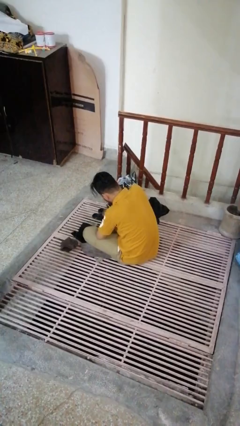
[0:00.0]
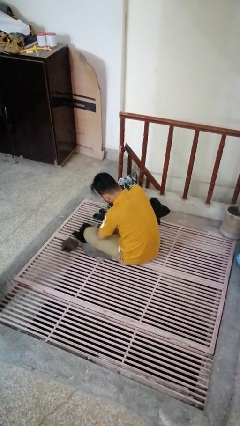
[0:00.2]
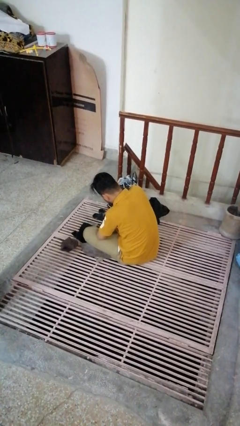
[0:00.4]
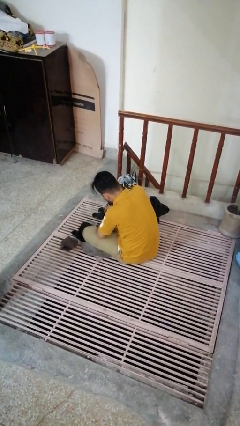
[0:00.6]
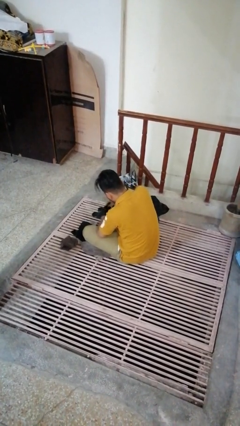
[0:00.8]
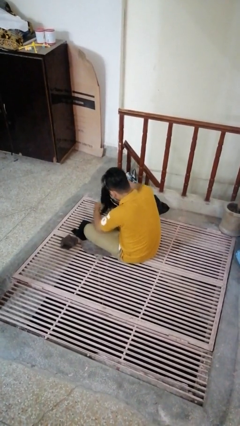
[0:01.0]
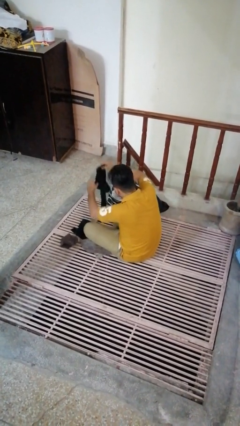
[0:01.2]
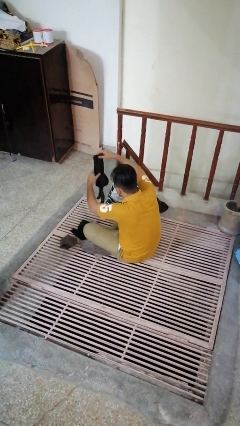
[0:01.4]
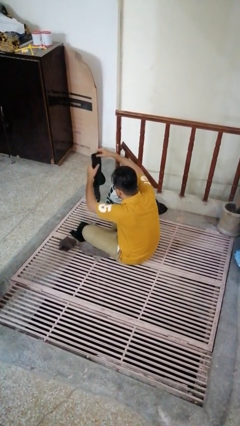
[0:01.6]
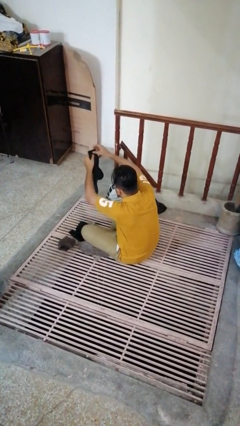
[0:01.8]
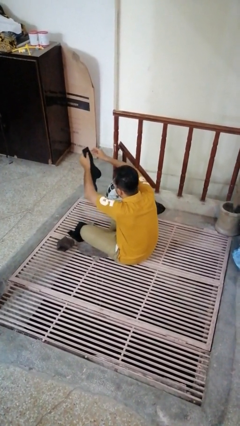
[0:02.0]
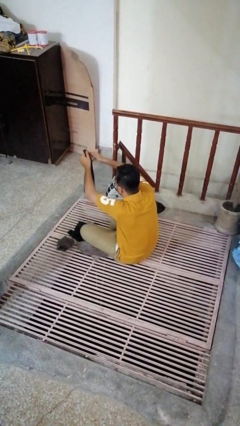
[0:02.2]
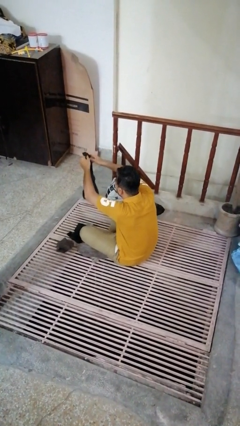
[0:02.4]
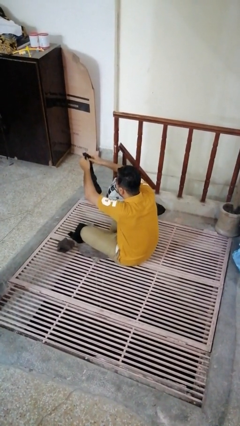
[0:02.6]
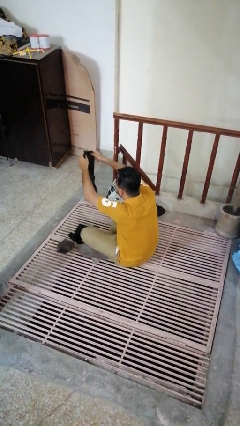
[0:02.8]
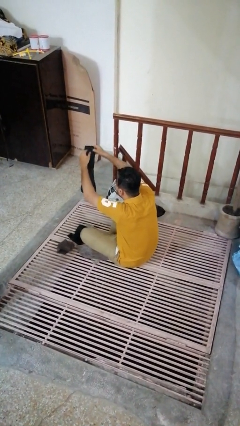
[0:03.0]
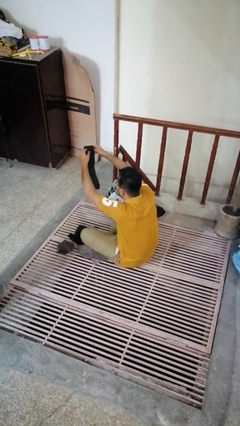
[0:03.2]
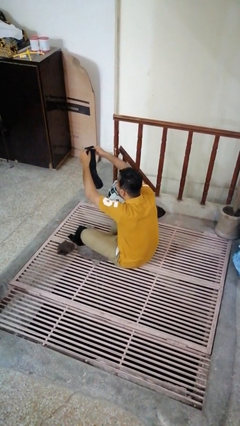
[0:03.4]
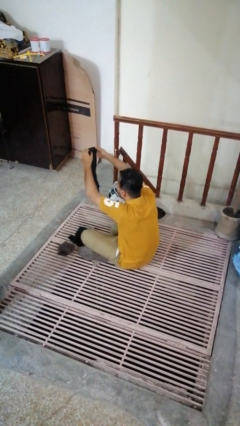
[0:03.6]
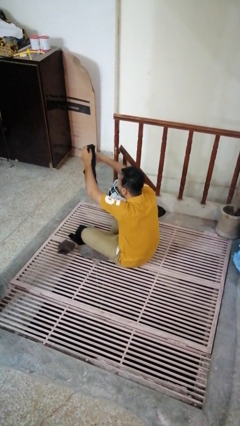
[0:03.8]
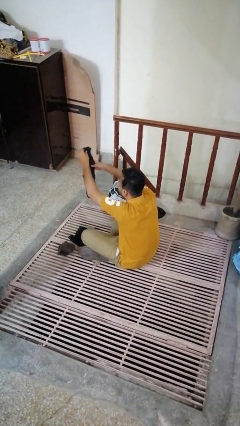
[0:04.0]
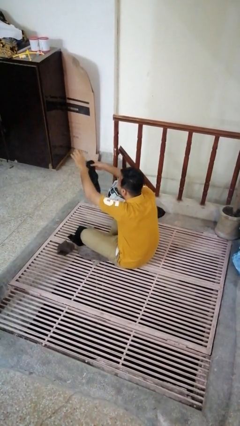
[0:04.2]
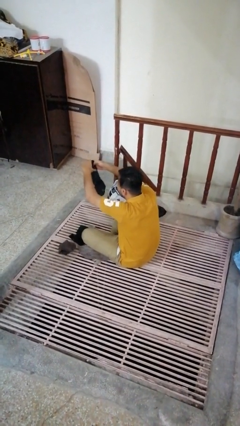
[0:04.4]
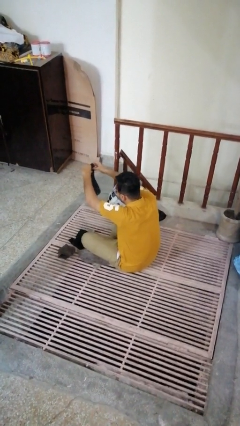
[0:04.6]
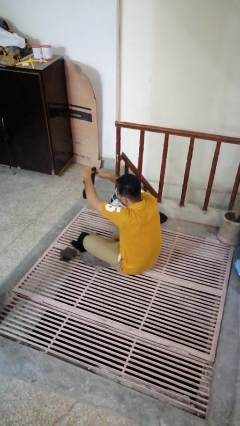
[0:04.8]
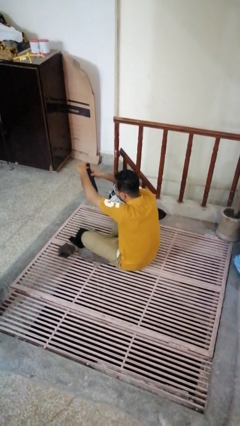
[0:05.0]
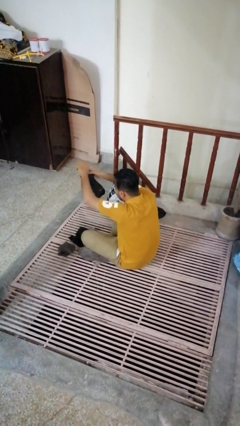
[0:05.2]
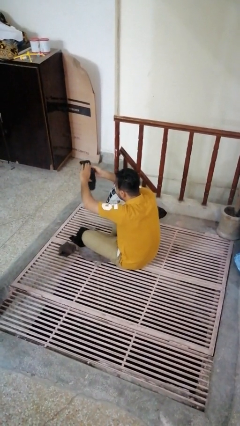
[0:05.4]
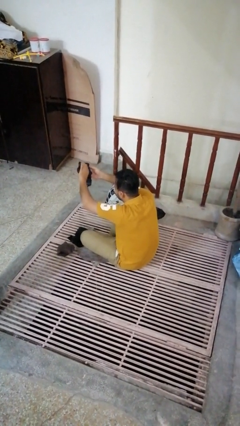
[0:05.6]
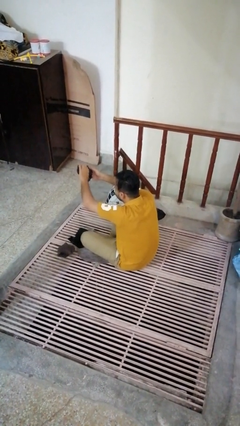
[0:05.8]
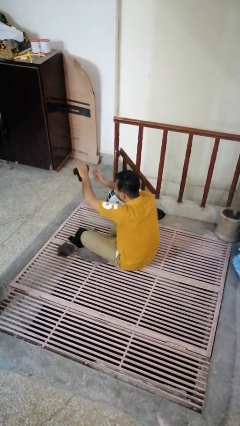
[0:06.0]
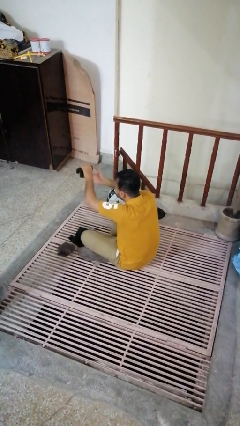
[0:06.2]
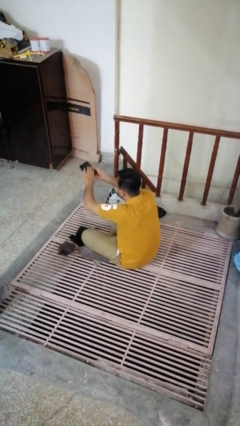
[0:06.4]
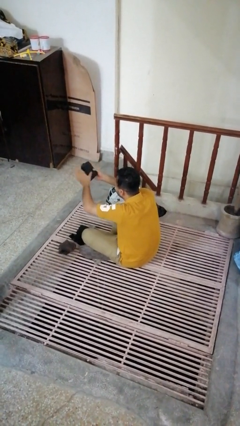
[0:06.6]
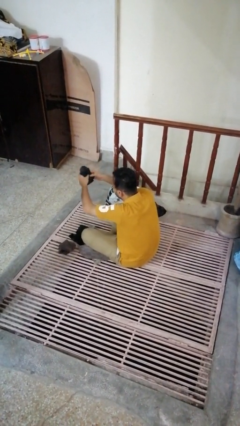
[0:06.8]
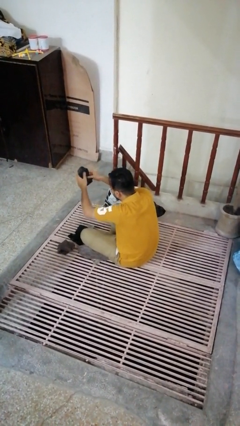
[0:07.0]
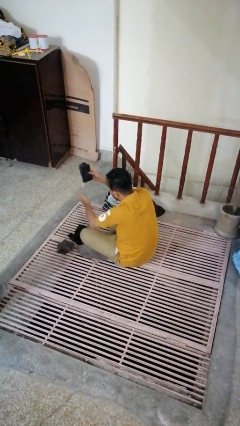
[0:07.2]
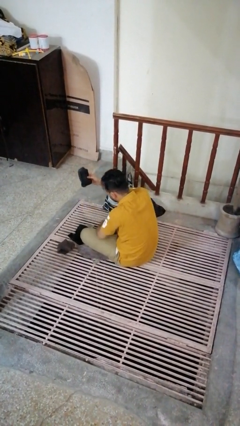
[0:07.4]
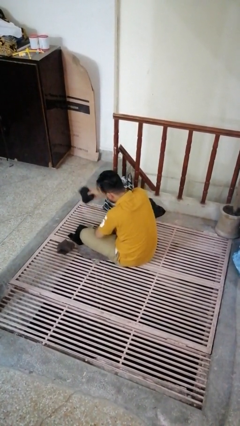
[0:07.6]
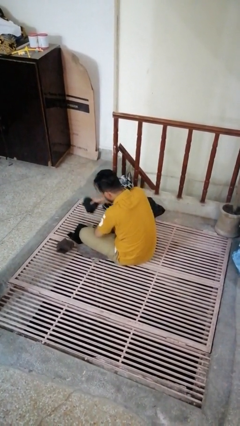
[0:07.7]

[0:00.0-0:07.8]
person folds socks

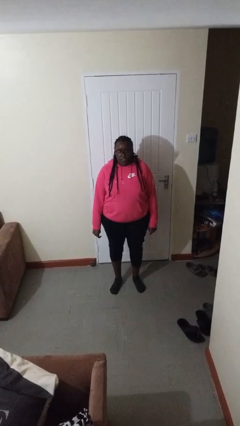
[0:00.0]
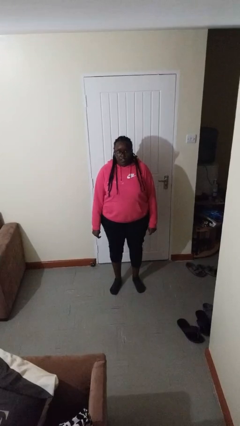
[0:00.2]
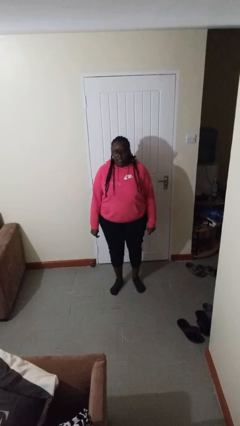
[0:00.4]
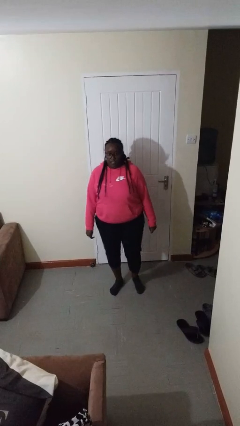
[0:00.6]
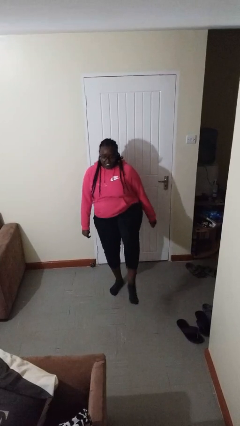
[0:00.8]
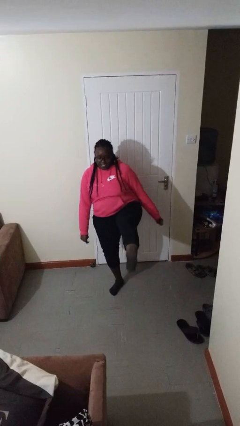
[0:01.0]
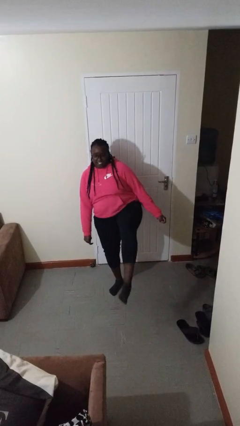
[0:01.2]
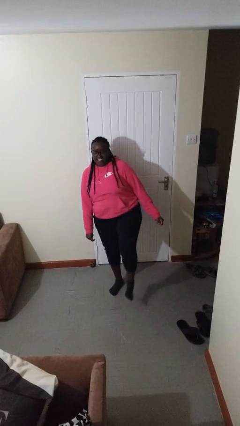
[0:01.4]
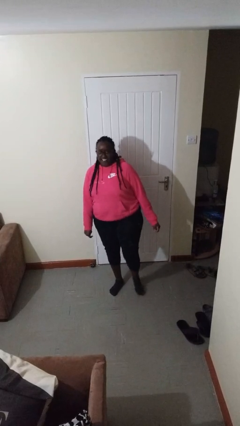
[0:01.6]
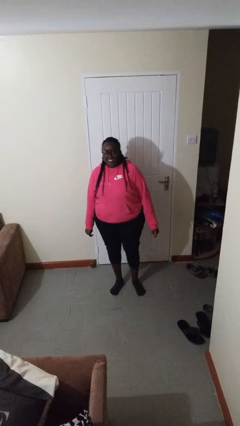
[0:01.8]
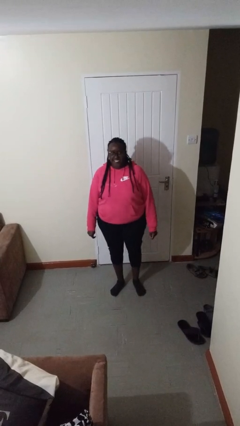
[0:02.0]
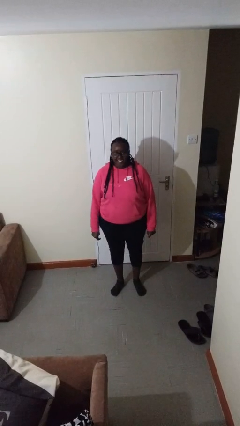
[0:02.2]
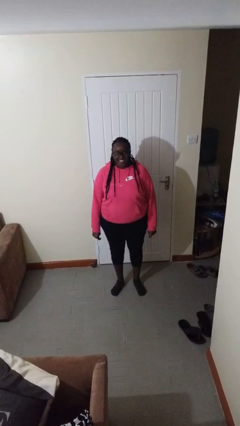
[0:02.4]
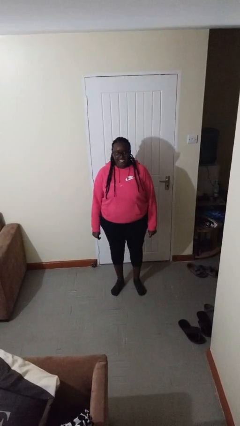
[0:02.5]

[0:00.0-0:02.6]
person karate kicks

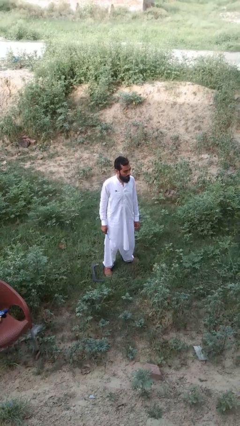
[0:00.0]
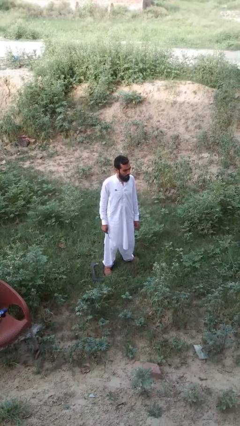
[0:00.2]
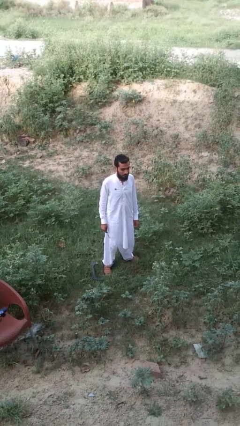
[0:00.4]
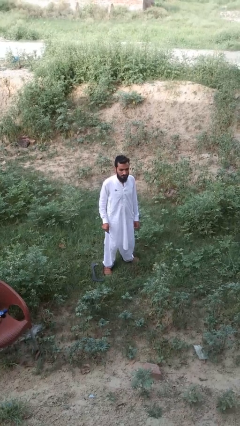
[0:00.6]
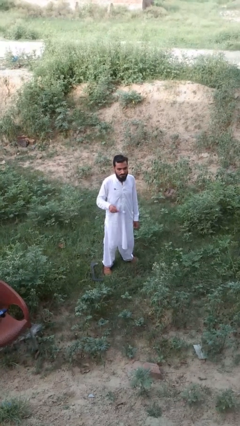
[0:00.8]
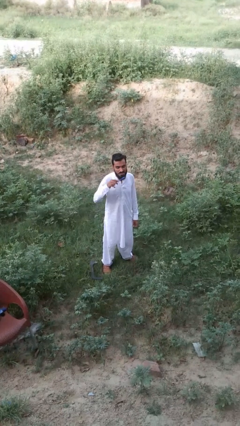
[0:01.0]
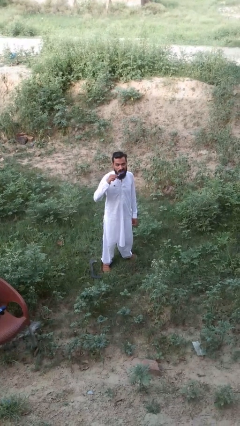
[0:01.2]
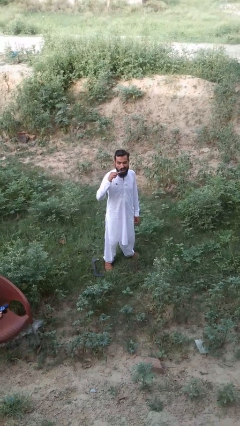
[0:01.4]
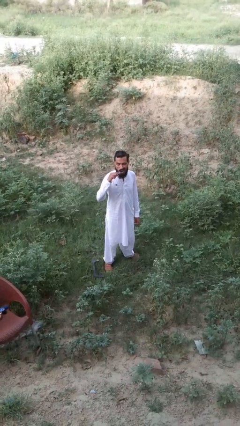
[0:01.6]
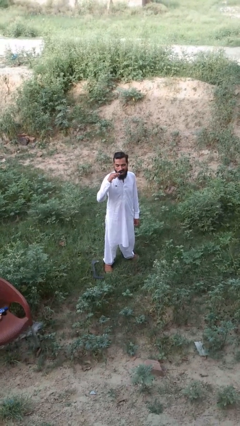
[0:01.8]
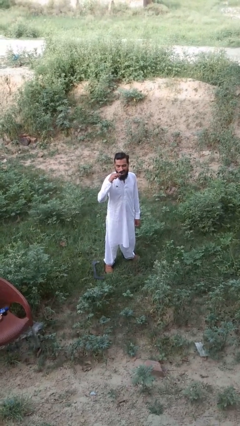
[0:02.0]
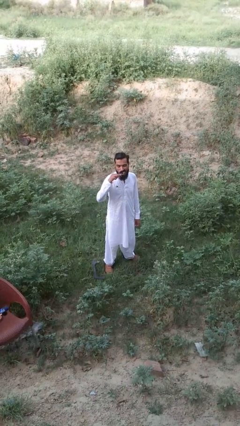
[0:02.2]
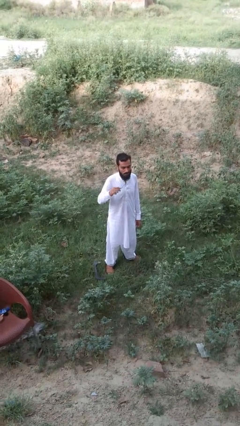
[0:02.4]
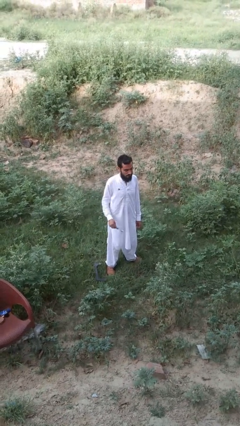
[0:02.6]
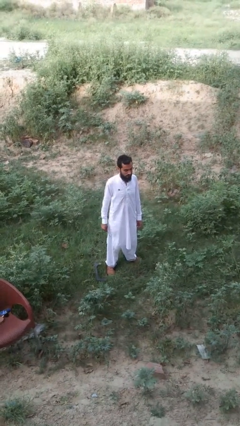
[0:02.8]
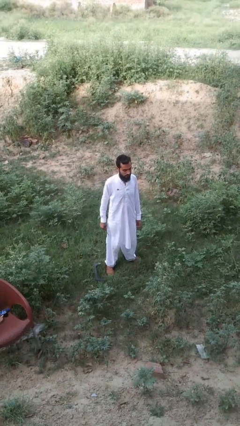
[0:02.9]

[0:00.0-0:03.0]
person brushes teeth

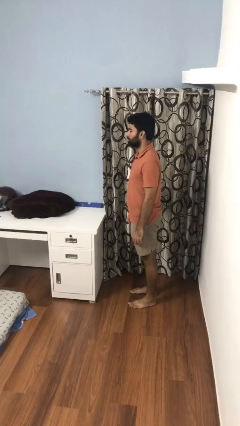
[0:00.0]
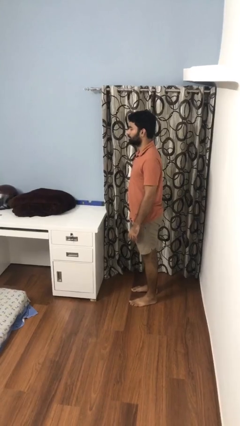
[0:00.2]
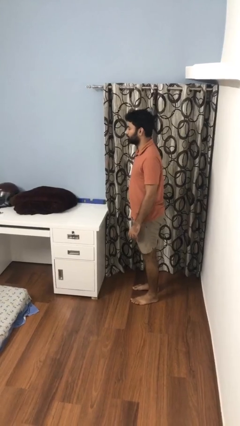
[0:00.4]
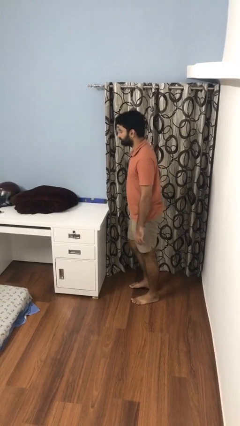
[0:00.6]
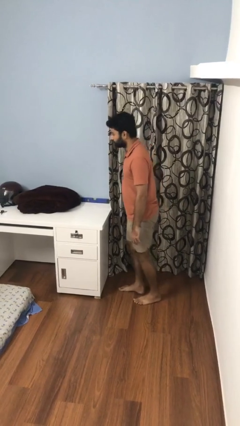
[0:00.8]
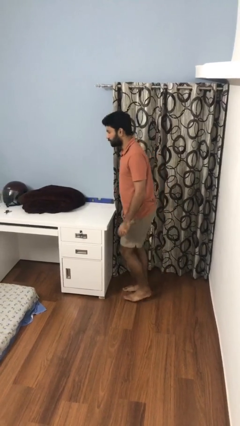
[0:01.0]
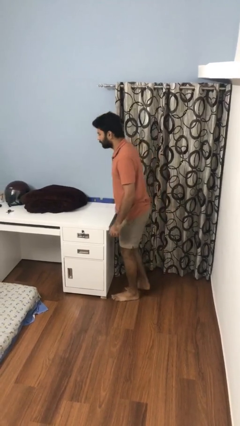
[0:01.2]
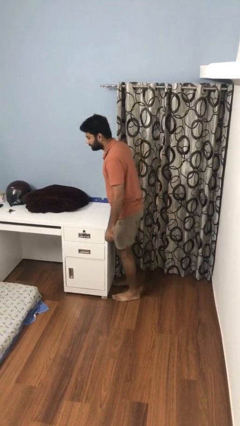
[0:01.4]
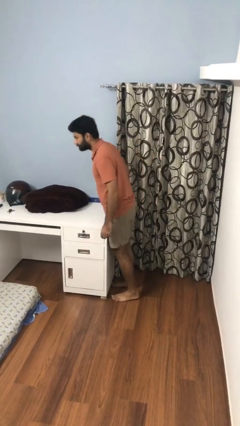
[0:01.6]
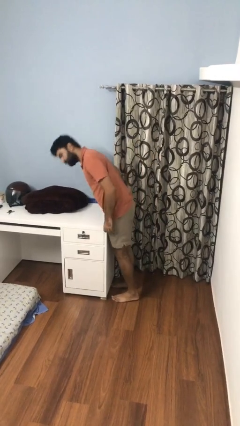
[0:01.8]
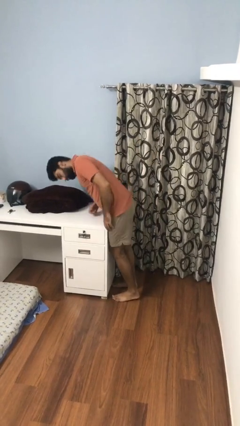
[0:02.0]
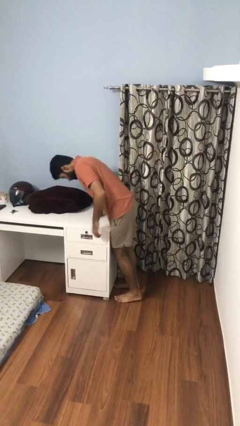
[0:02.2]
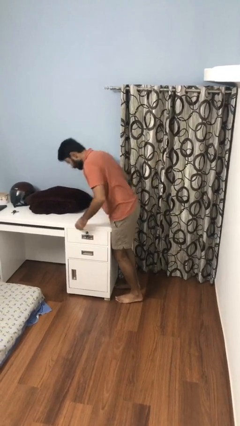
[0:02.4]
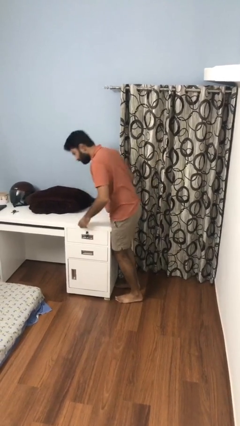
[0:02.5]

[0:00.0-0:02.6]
person bumps into table

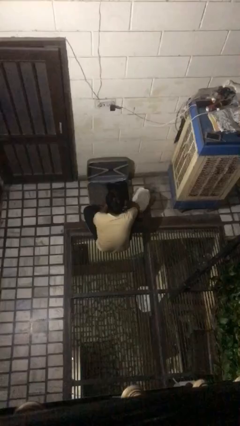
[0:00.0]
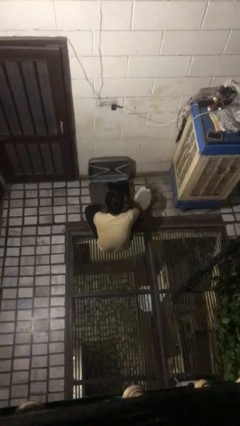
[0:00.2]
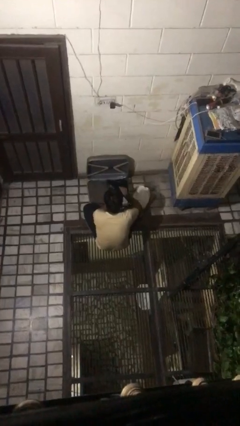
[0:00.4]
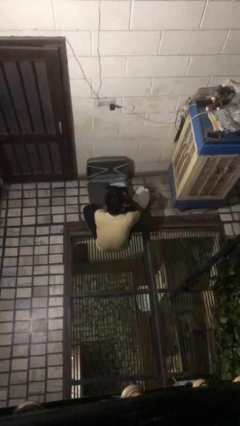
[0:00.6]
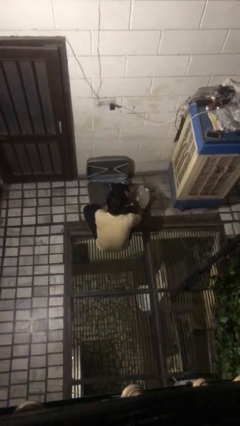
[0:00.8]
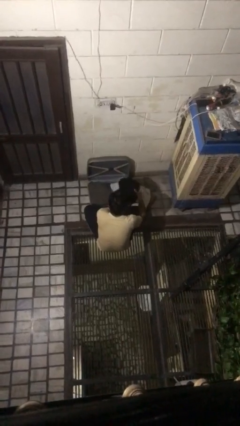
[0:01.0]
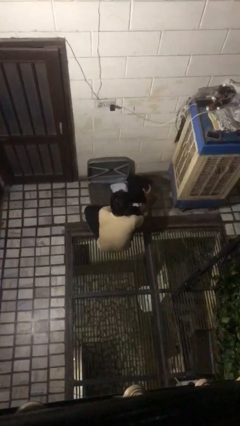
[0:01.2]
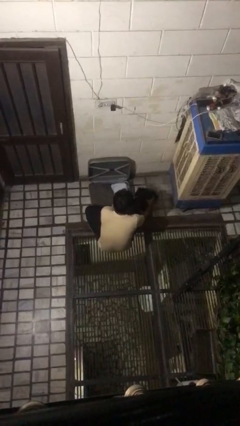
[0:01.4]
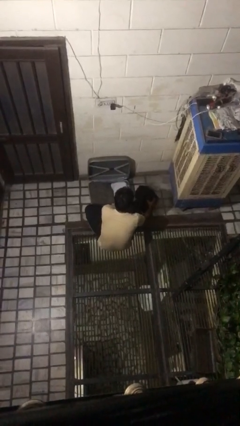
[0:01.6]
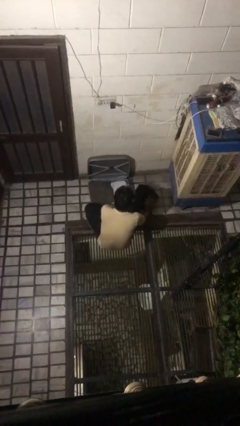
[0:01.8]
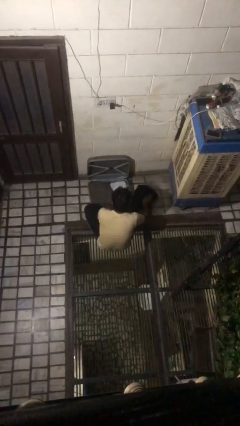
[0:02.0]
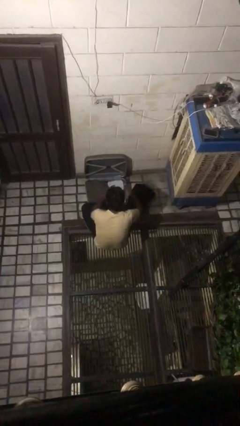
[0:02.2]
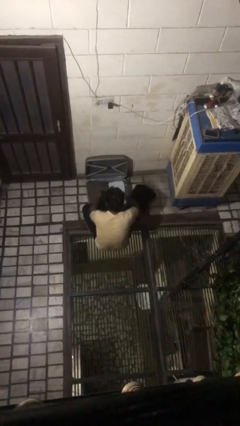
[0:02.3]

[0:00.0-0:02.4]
person unloads clothes from suitcase
